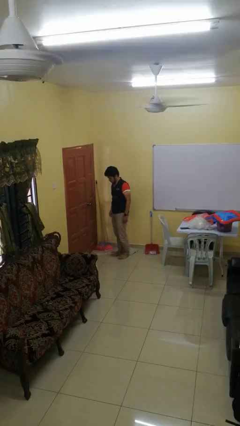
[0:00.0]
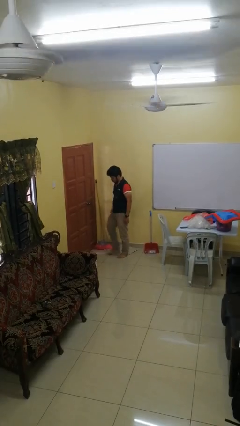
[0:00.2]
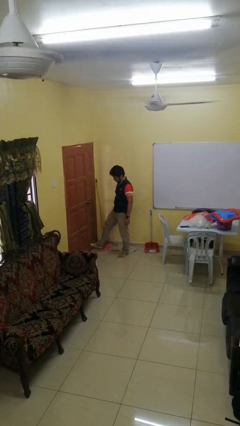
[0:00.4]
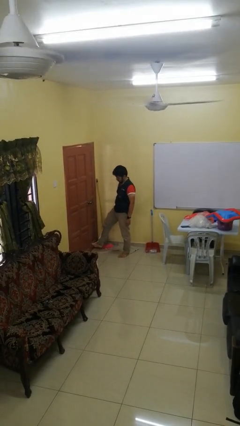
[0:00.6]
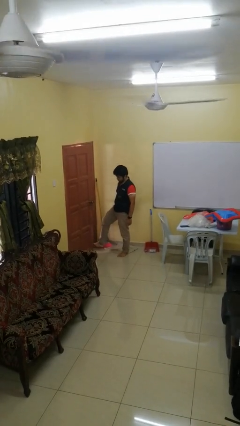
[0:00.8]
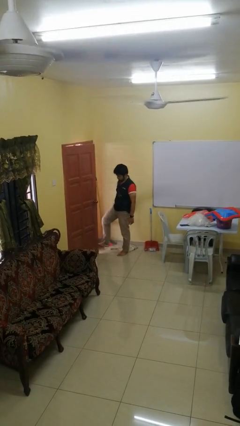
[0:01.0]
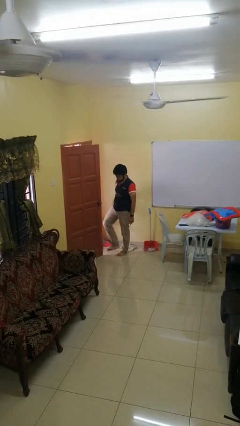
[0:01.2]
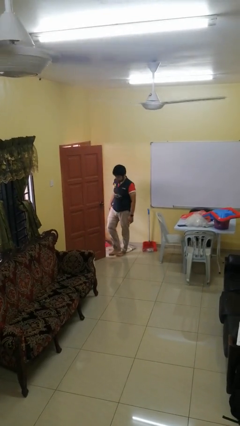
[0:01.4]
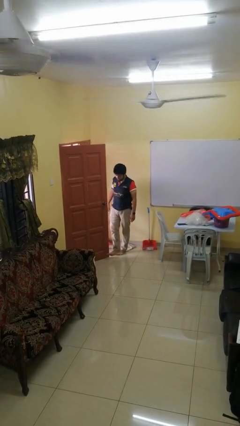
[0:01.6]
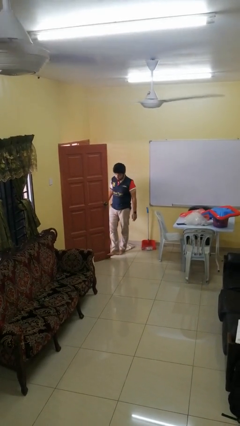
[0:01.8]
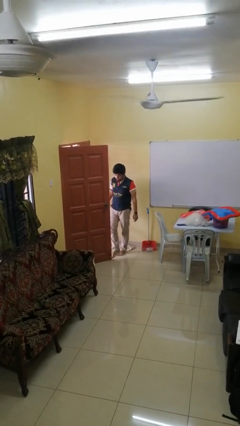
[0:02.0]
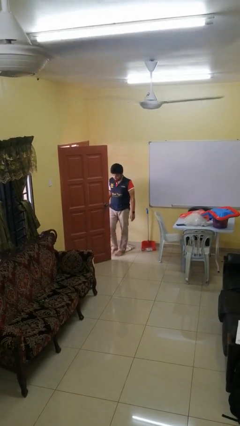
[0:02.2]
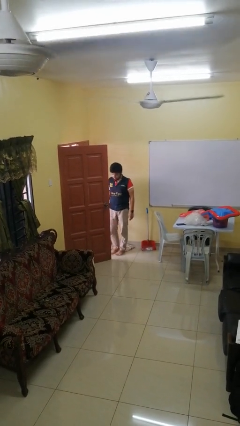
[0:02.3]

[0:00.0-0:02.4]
person opens facility door

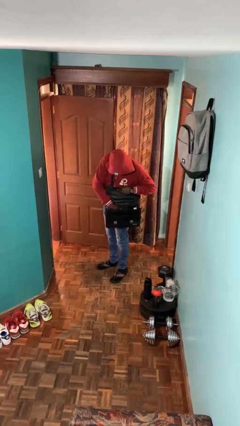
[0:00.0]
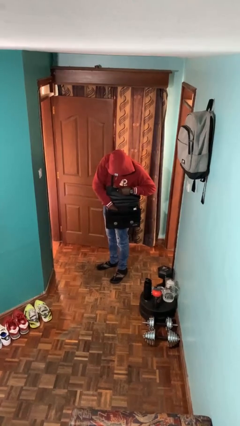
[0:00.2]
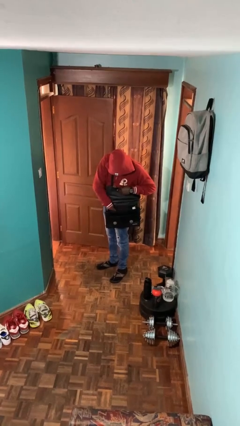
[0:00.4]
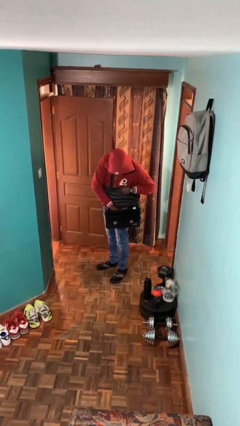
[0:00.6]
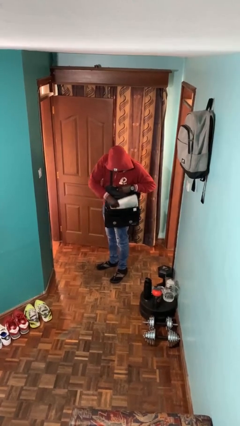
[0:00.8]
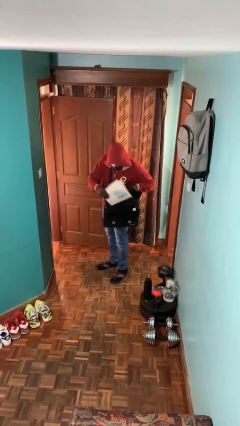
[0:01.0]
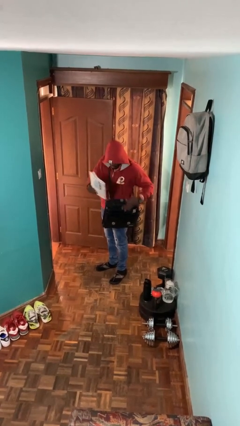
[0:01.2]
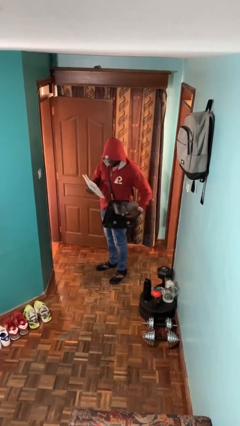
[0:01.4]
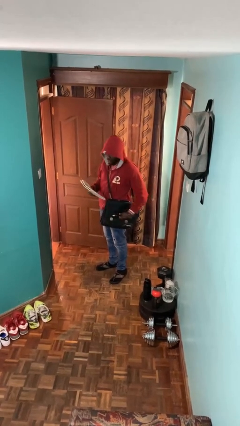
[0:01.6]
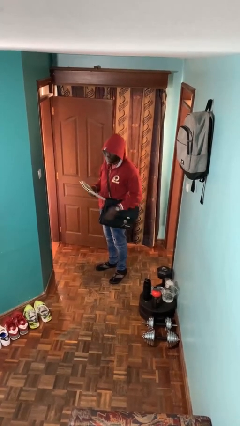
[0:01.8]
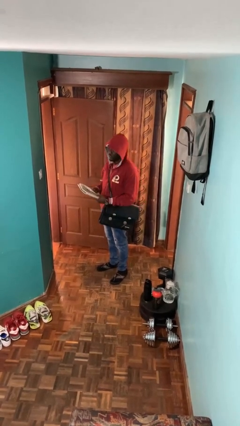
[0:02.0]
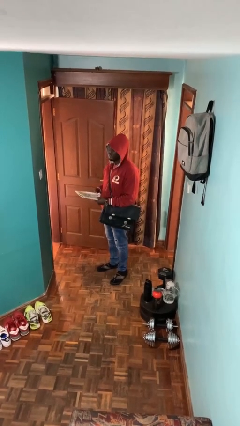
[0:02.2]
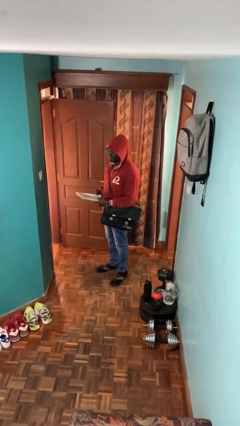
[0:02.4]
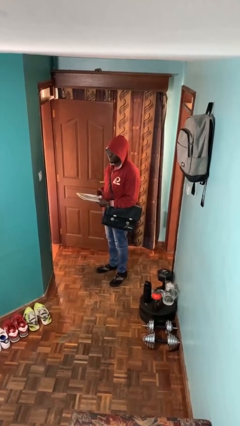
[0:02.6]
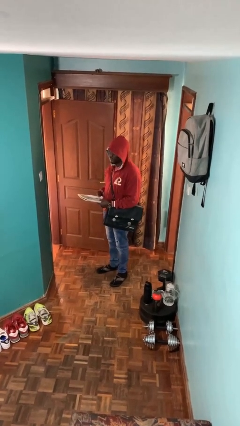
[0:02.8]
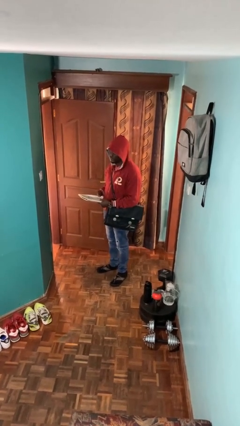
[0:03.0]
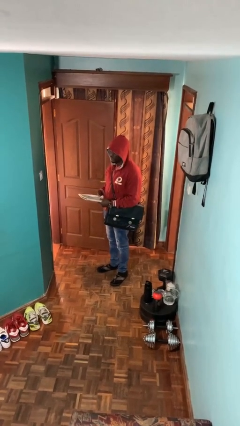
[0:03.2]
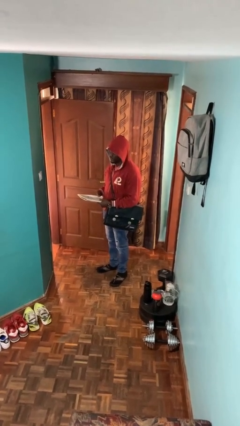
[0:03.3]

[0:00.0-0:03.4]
person takes object from purse

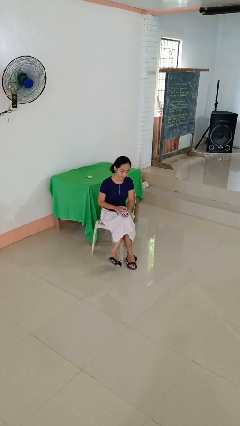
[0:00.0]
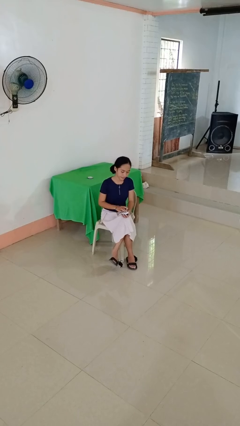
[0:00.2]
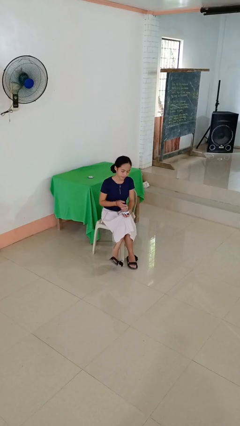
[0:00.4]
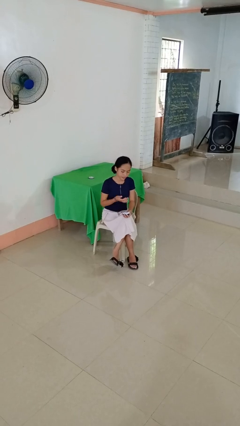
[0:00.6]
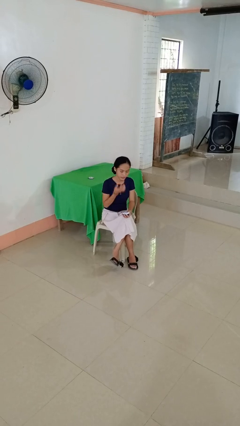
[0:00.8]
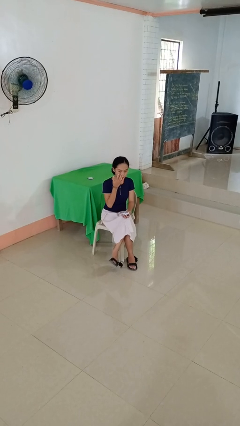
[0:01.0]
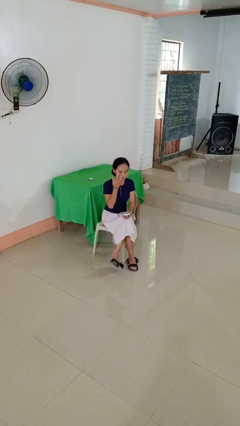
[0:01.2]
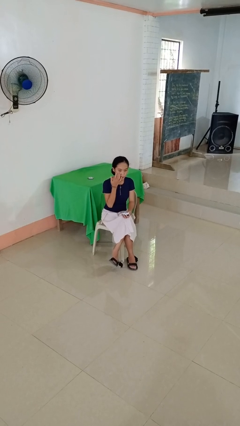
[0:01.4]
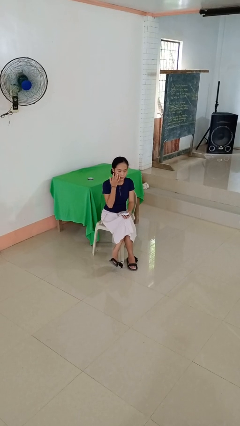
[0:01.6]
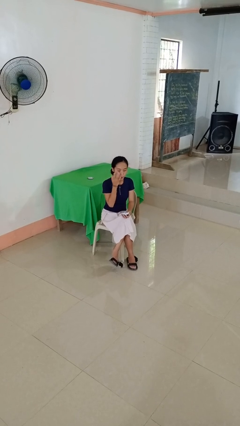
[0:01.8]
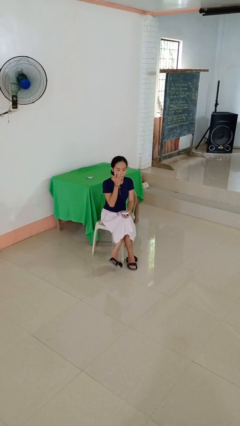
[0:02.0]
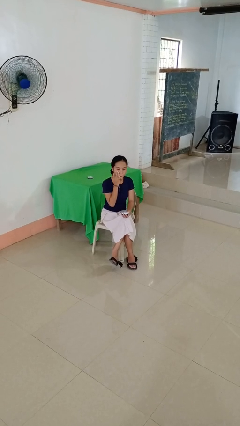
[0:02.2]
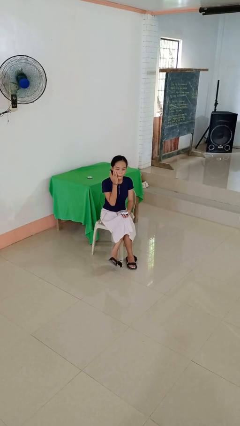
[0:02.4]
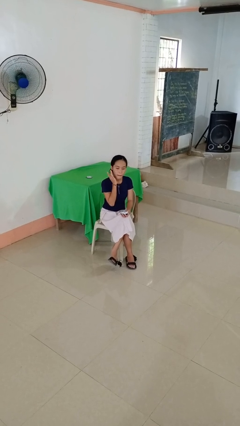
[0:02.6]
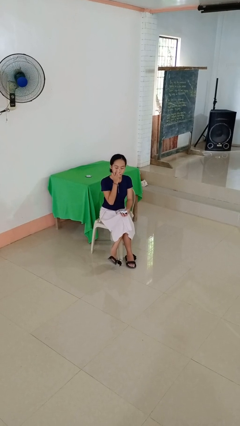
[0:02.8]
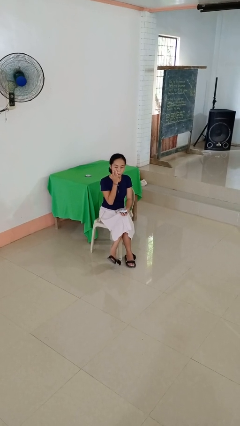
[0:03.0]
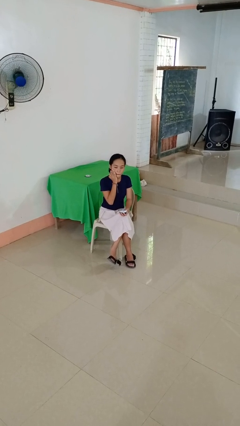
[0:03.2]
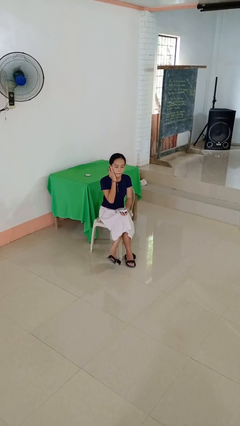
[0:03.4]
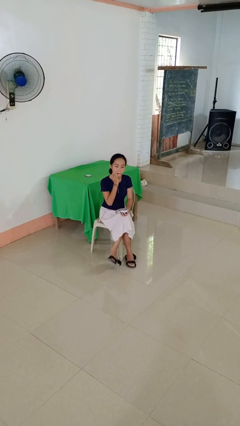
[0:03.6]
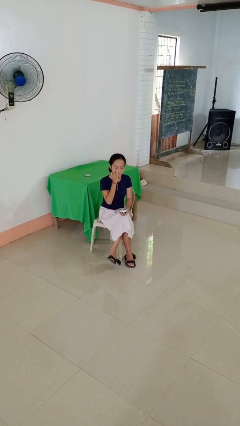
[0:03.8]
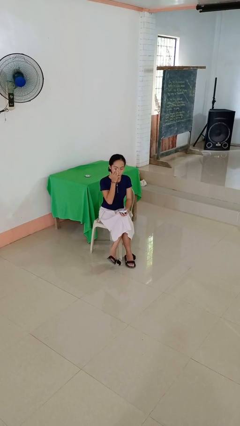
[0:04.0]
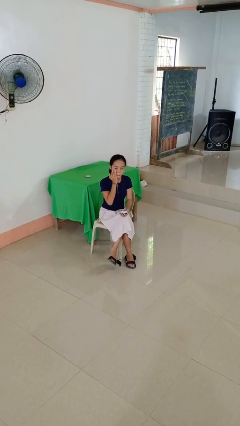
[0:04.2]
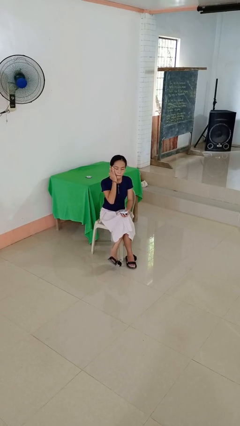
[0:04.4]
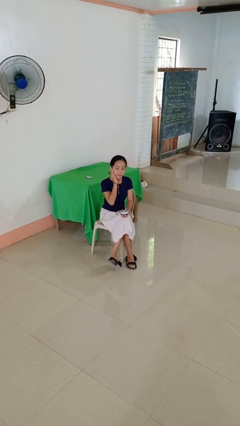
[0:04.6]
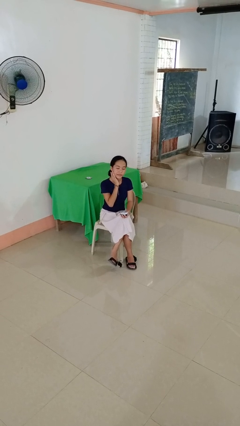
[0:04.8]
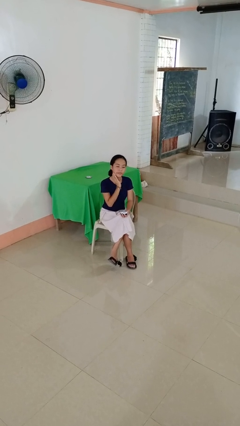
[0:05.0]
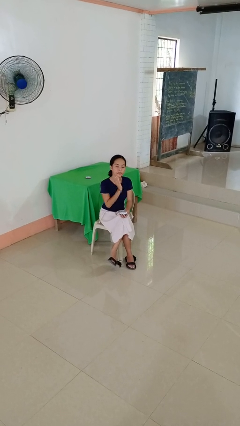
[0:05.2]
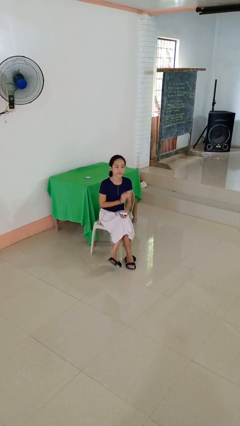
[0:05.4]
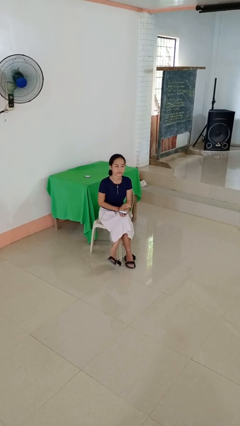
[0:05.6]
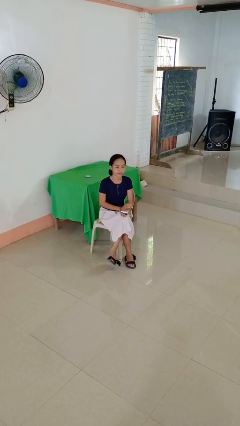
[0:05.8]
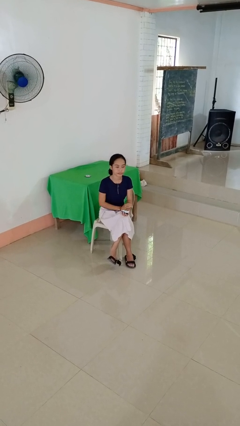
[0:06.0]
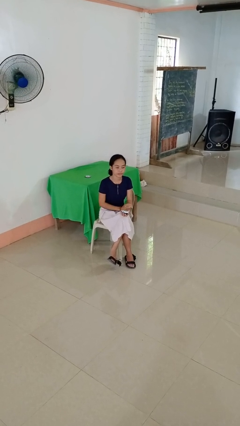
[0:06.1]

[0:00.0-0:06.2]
person applies facial moisturizer

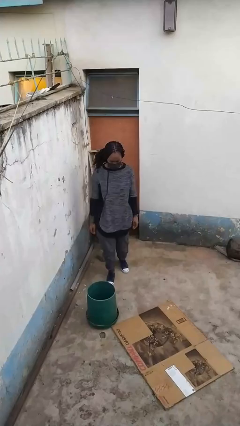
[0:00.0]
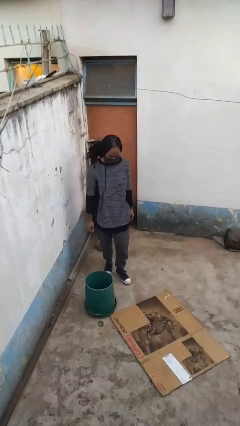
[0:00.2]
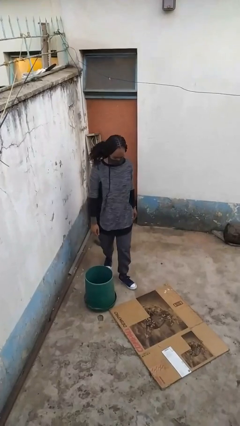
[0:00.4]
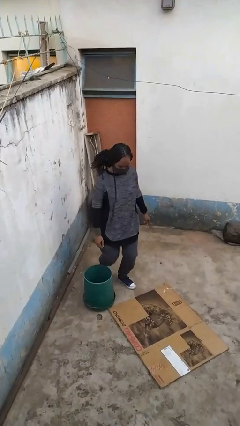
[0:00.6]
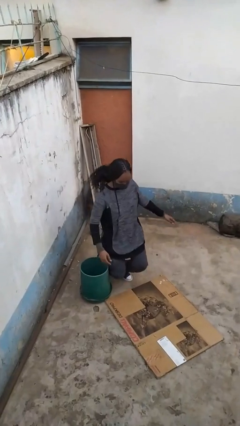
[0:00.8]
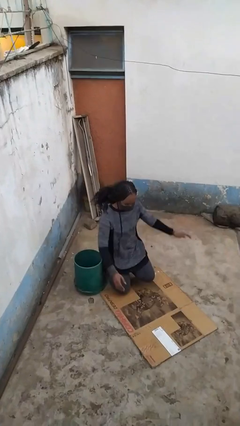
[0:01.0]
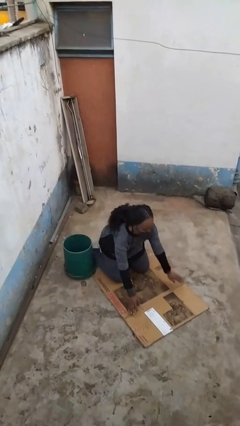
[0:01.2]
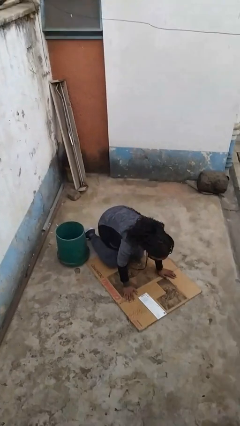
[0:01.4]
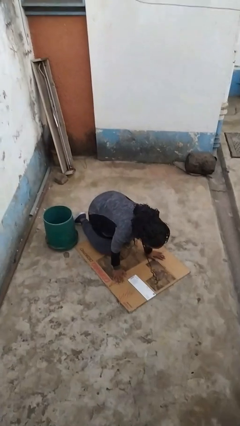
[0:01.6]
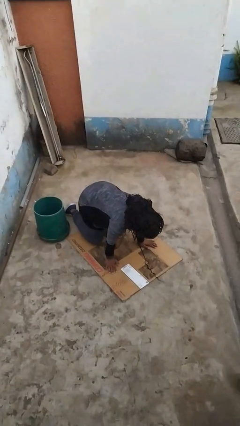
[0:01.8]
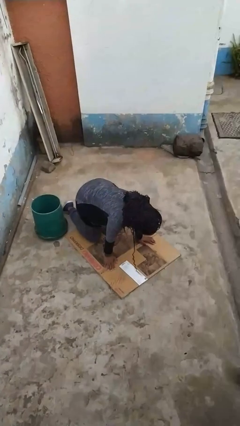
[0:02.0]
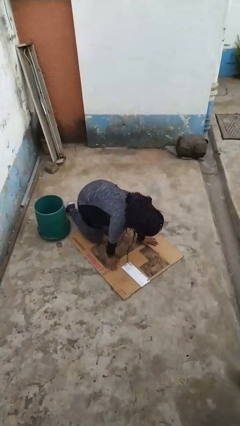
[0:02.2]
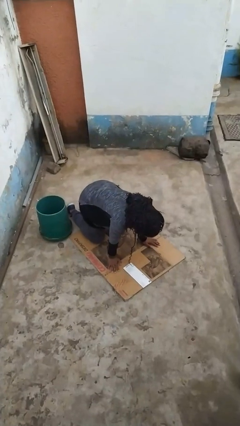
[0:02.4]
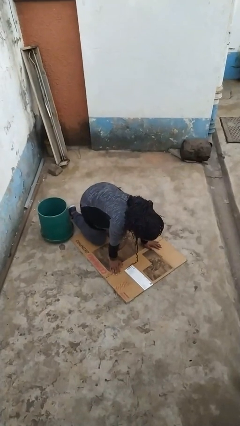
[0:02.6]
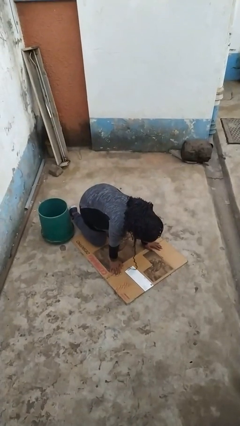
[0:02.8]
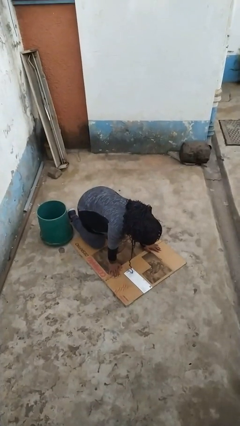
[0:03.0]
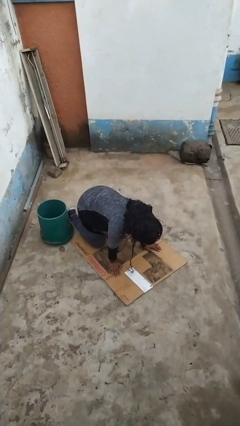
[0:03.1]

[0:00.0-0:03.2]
person trips on object on floor

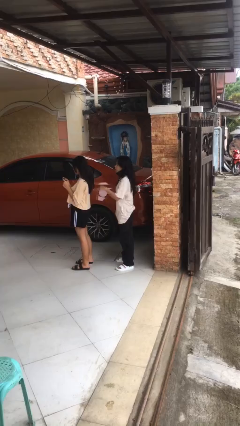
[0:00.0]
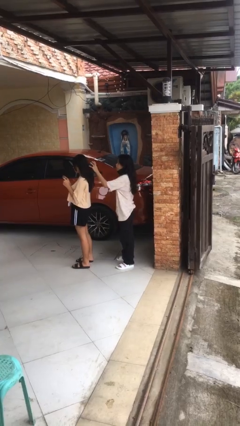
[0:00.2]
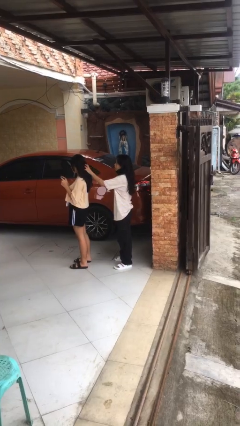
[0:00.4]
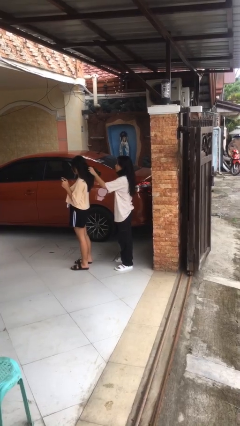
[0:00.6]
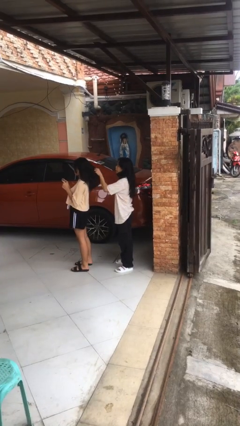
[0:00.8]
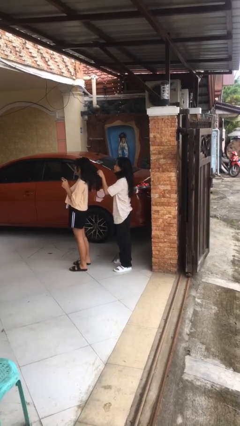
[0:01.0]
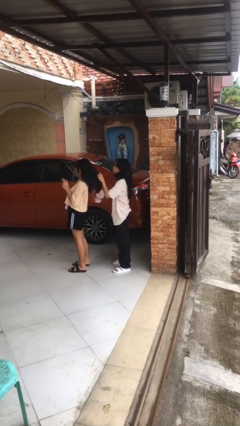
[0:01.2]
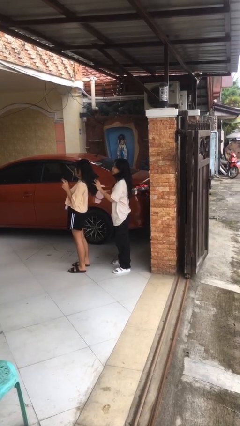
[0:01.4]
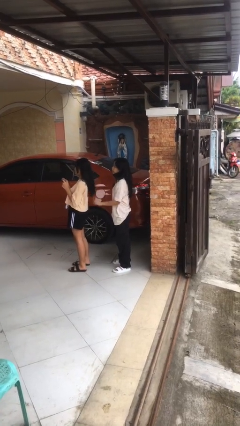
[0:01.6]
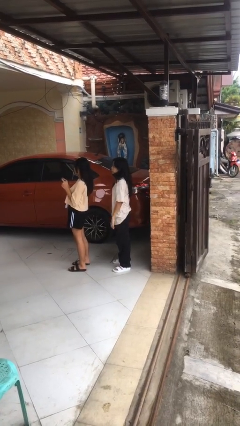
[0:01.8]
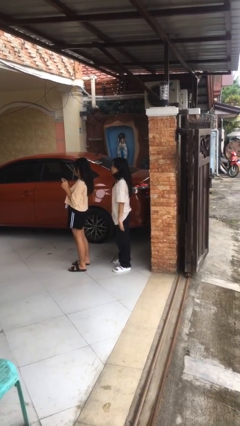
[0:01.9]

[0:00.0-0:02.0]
person grabs person by hair

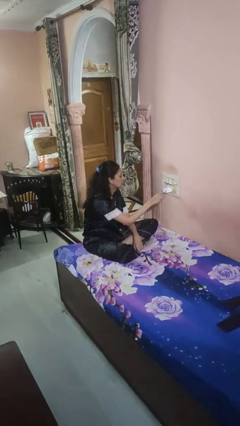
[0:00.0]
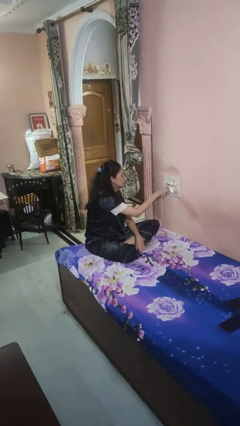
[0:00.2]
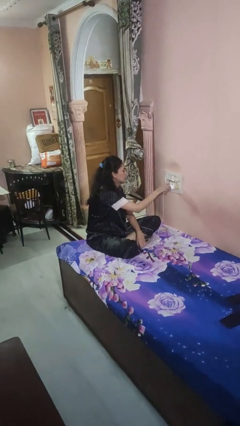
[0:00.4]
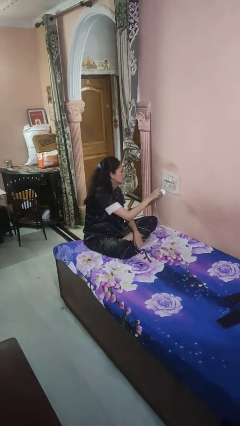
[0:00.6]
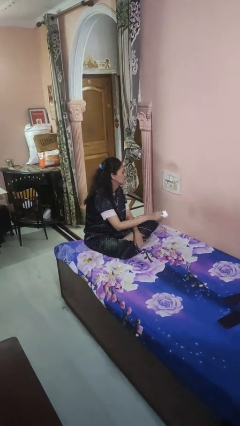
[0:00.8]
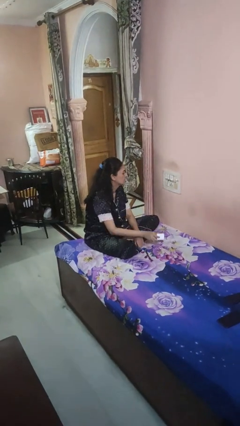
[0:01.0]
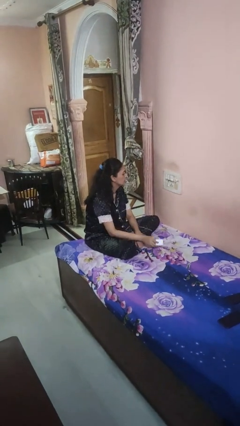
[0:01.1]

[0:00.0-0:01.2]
person unplugs from electrical socket
